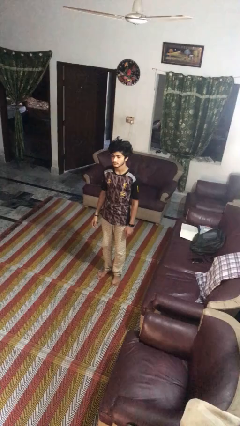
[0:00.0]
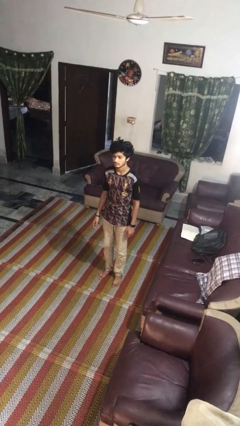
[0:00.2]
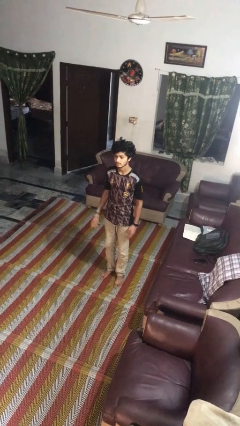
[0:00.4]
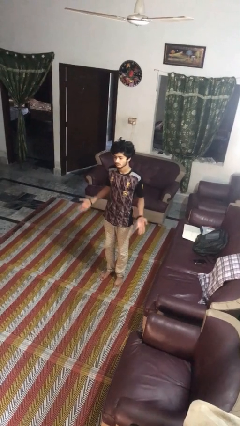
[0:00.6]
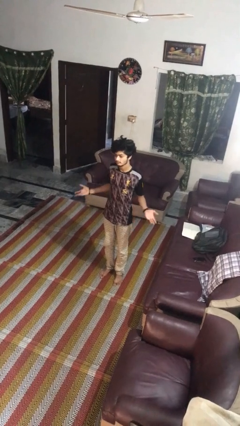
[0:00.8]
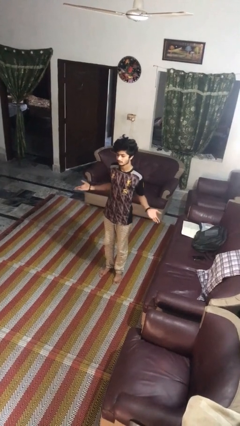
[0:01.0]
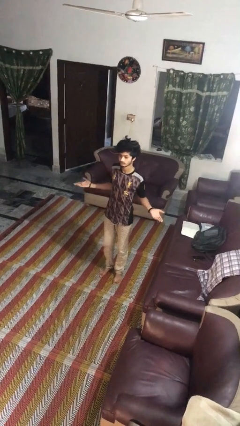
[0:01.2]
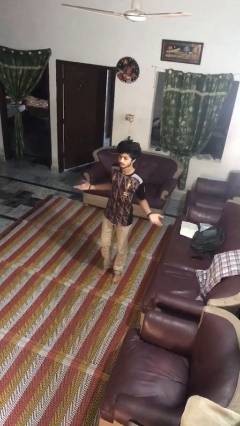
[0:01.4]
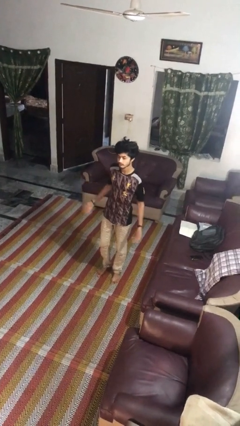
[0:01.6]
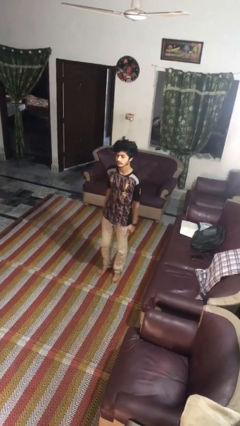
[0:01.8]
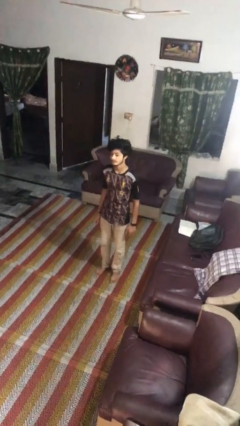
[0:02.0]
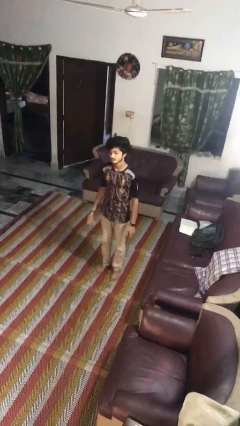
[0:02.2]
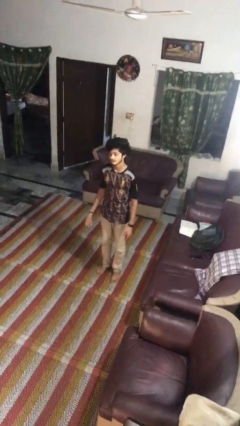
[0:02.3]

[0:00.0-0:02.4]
person shrugs

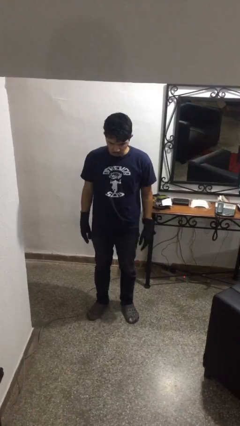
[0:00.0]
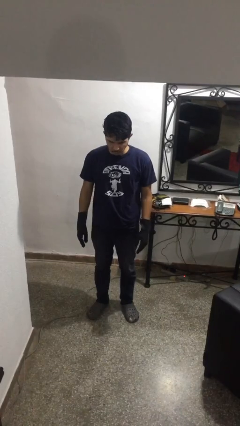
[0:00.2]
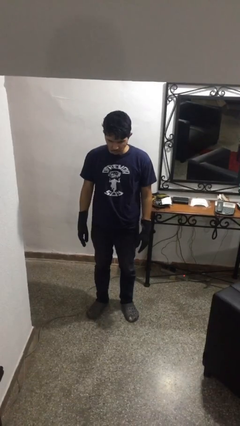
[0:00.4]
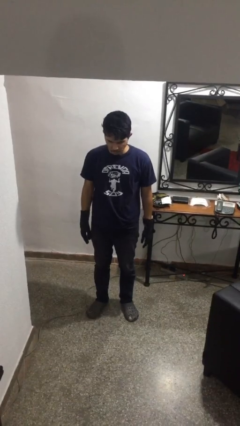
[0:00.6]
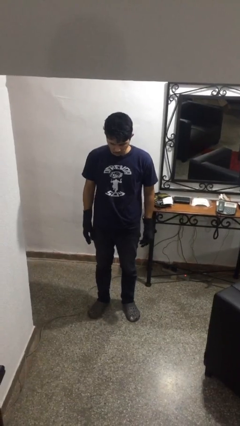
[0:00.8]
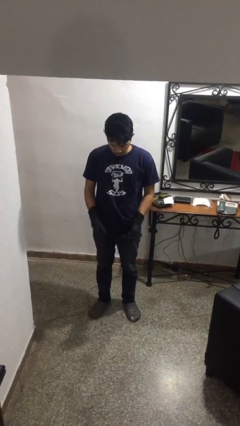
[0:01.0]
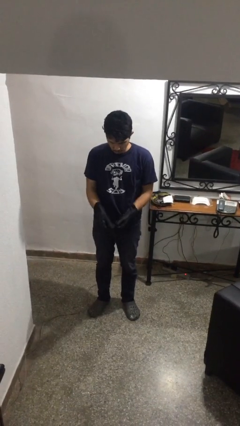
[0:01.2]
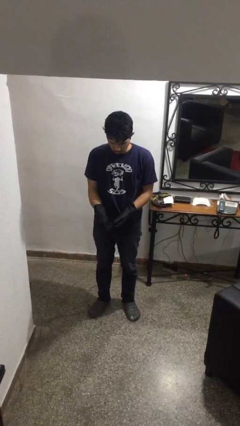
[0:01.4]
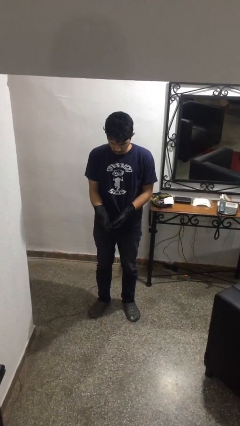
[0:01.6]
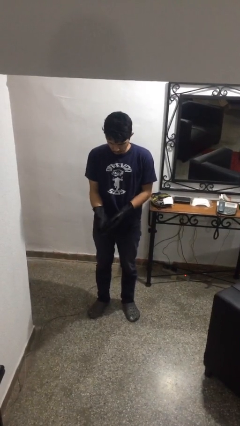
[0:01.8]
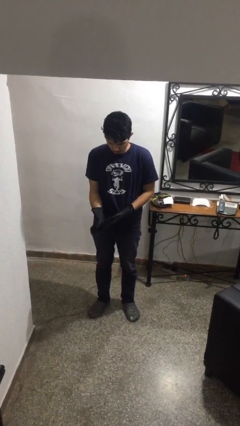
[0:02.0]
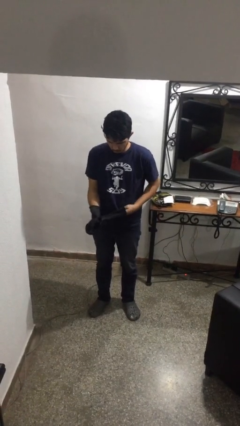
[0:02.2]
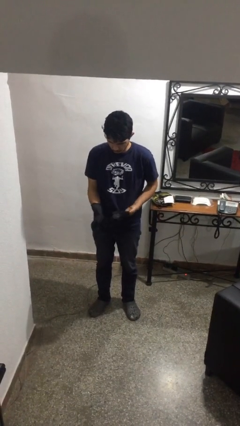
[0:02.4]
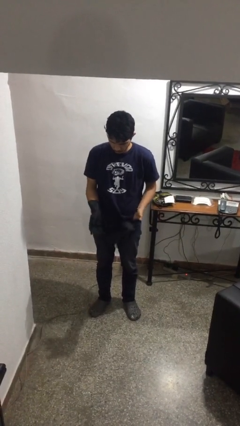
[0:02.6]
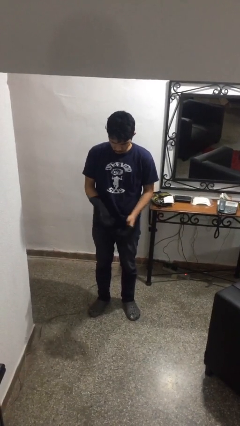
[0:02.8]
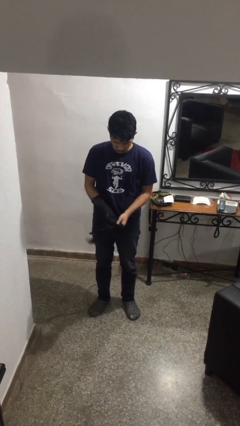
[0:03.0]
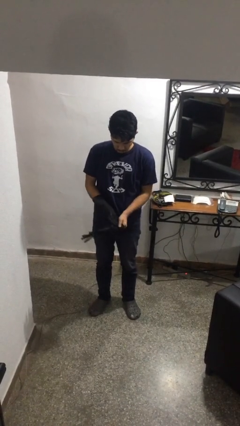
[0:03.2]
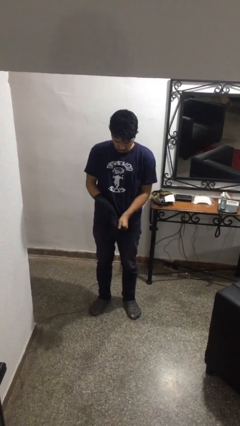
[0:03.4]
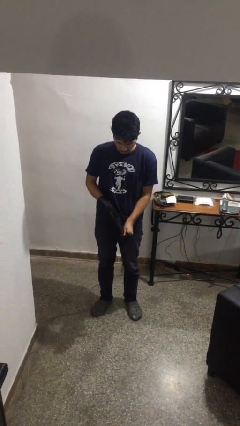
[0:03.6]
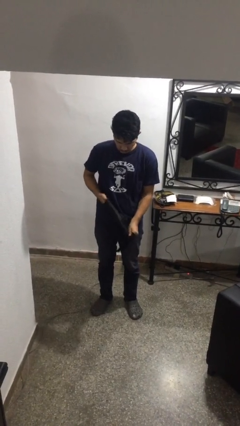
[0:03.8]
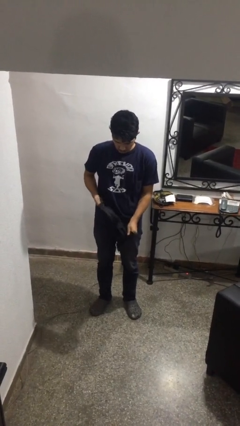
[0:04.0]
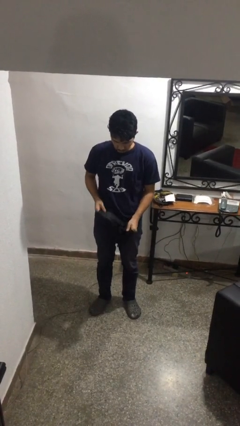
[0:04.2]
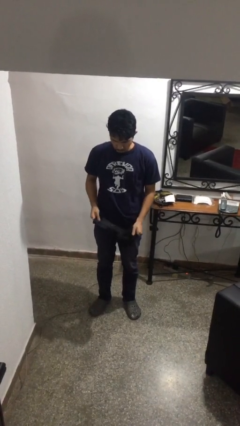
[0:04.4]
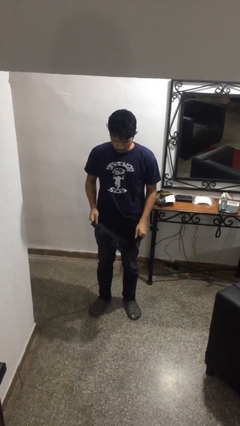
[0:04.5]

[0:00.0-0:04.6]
person takes off gloves

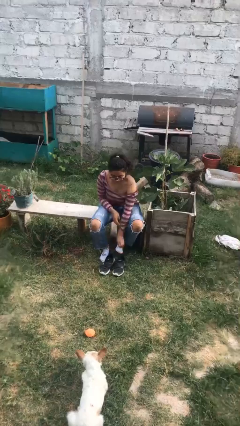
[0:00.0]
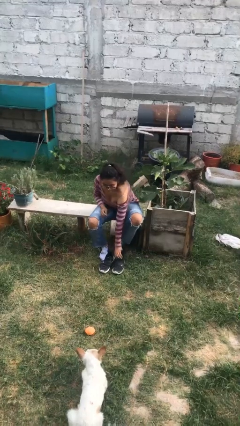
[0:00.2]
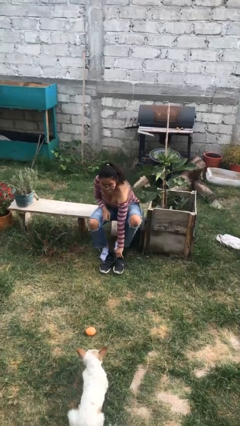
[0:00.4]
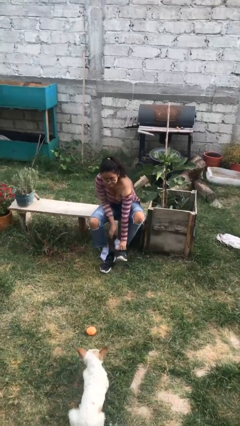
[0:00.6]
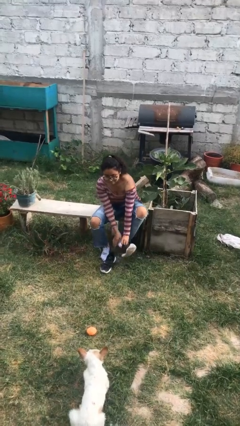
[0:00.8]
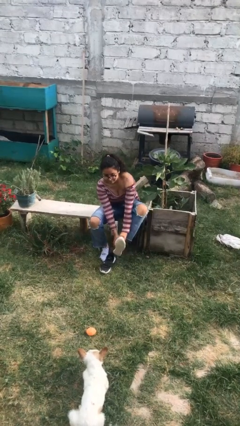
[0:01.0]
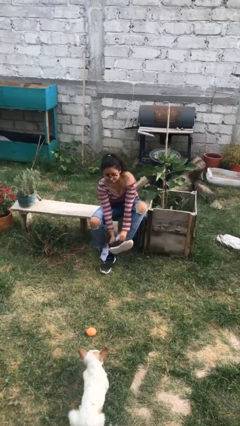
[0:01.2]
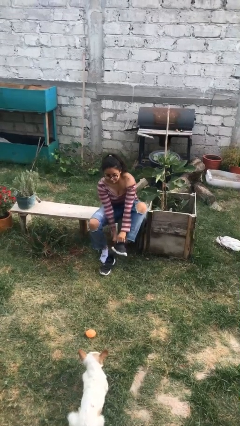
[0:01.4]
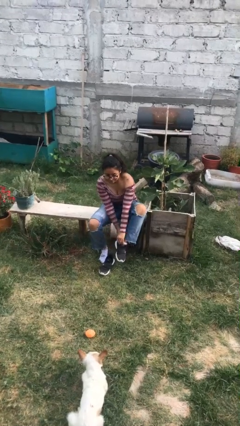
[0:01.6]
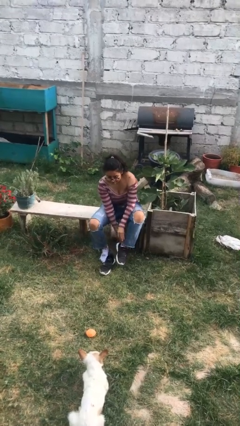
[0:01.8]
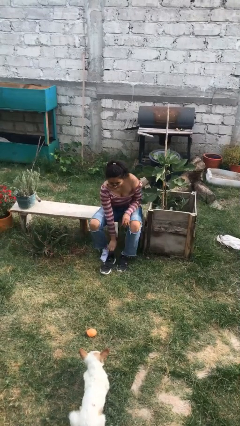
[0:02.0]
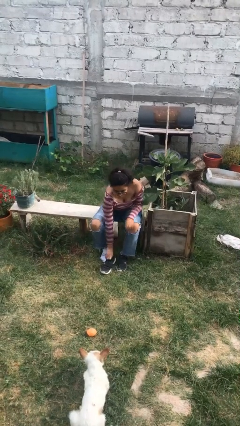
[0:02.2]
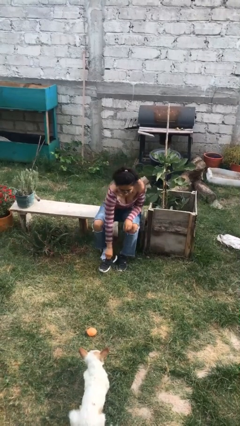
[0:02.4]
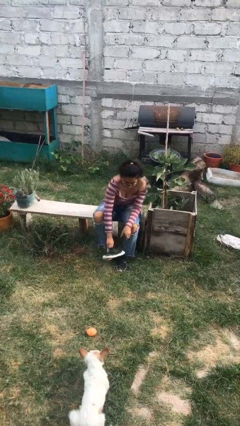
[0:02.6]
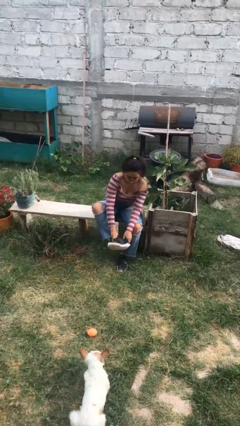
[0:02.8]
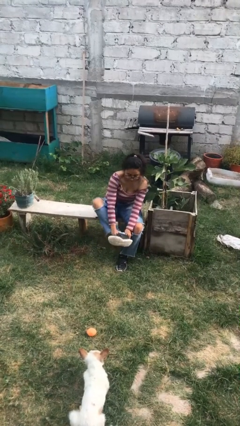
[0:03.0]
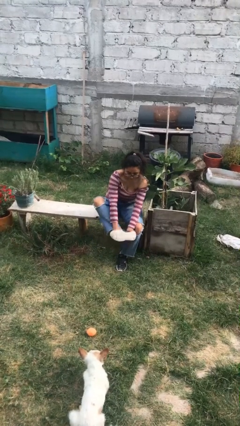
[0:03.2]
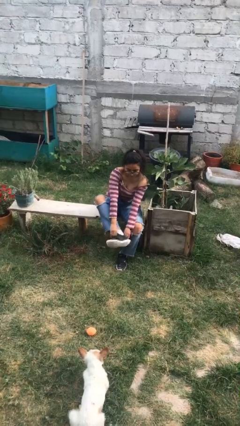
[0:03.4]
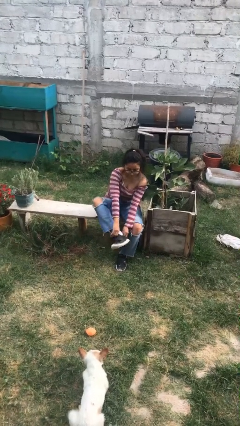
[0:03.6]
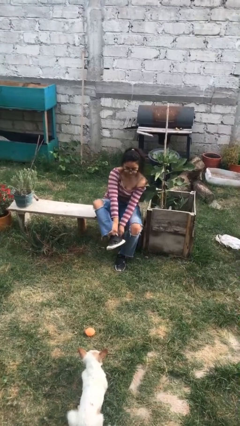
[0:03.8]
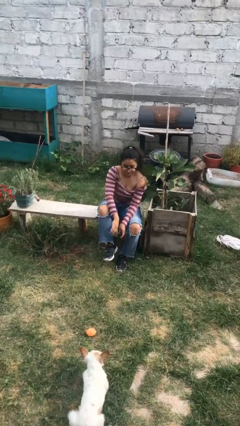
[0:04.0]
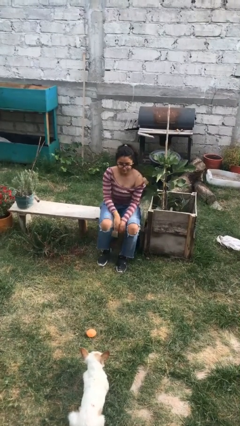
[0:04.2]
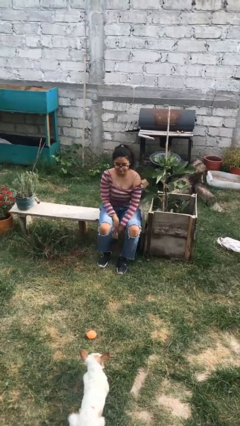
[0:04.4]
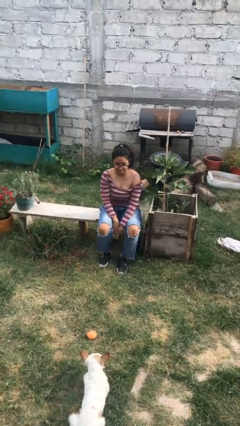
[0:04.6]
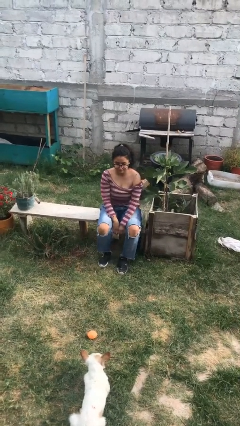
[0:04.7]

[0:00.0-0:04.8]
person puts on shoes

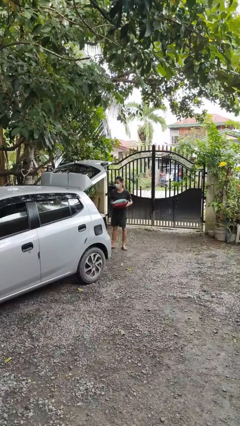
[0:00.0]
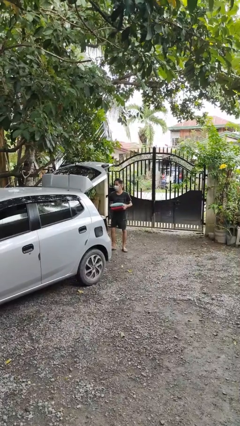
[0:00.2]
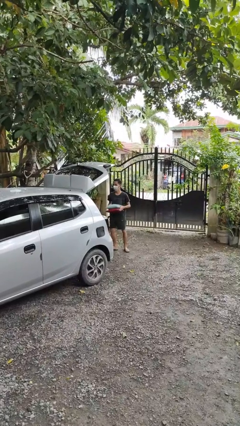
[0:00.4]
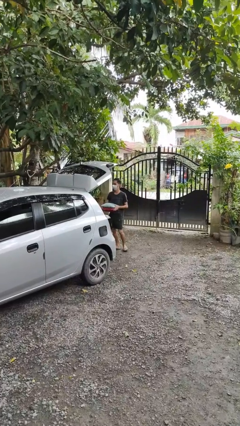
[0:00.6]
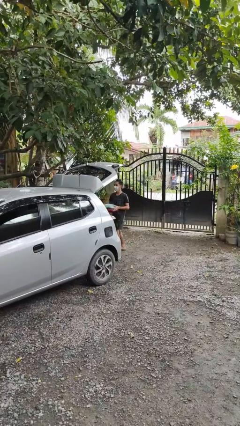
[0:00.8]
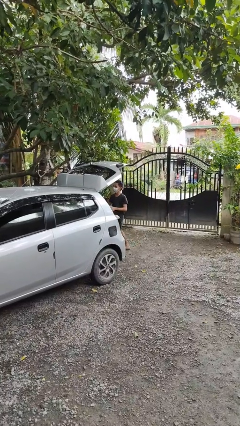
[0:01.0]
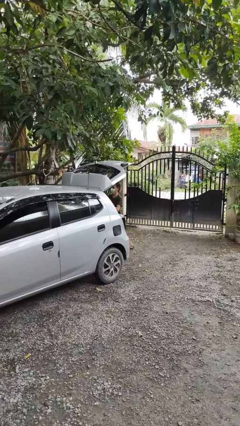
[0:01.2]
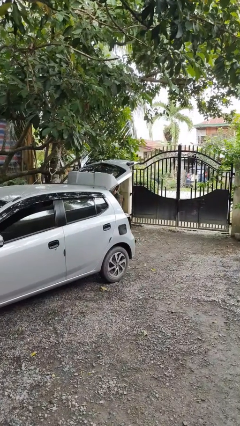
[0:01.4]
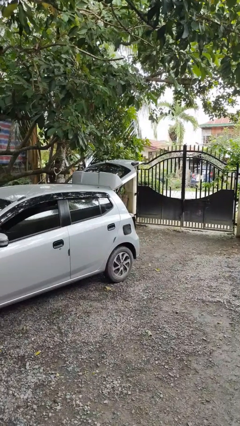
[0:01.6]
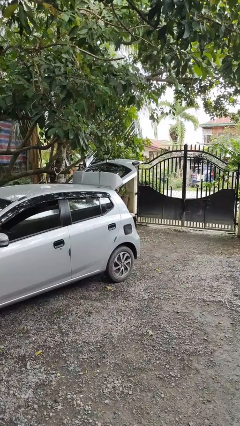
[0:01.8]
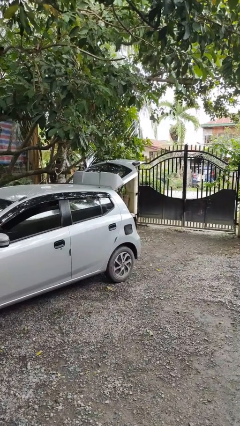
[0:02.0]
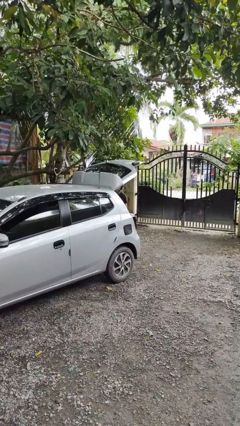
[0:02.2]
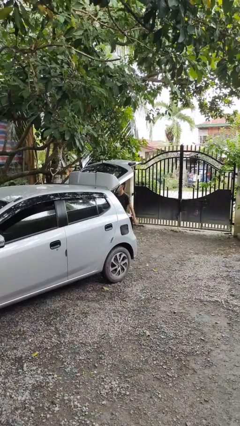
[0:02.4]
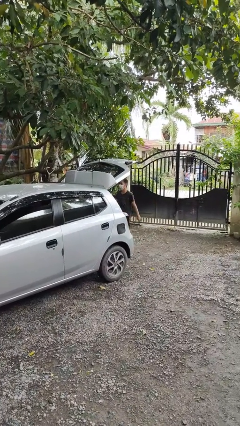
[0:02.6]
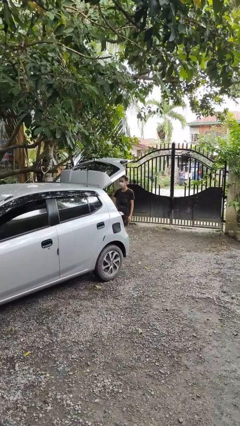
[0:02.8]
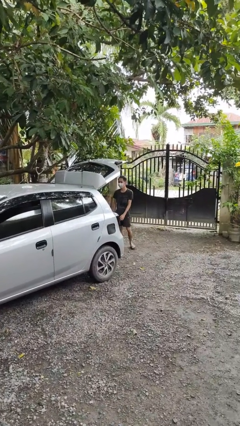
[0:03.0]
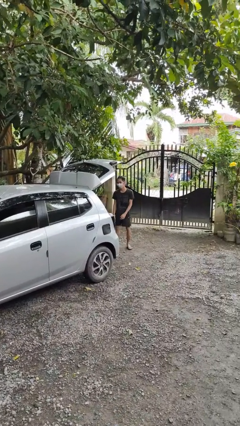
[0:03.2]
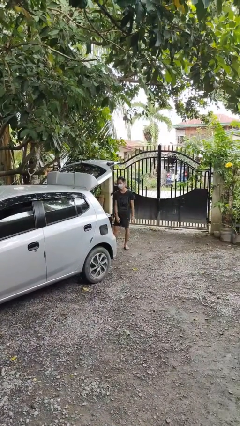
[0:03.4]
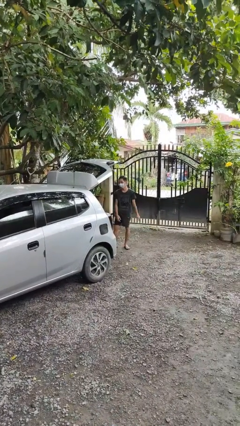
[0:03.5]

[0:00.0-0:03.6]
person loads car

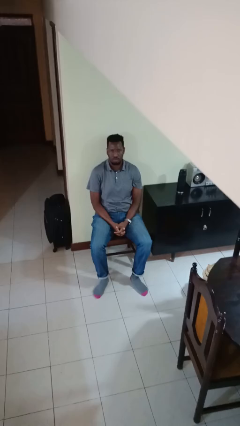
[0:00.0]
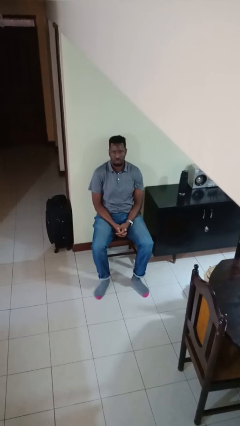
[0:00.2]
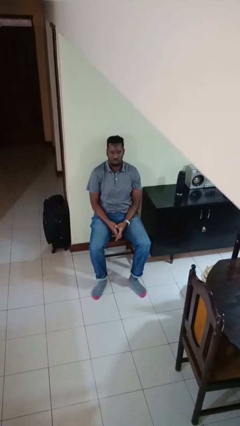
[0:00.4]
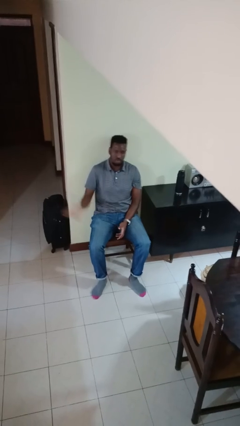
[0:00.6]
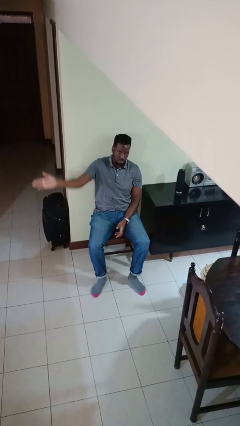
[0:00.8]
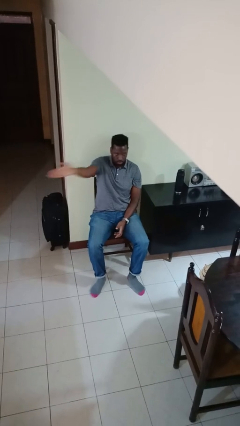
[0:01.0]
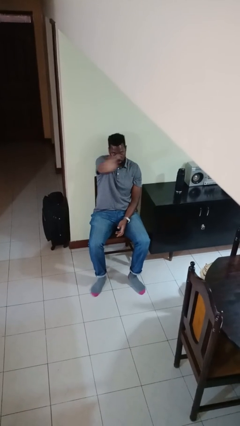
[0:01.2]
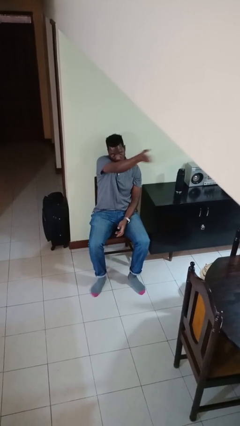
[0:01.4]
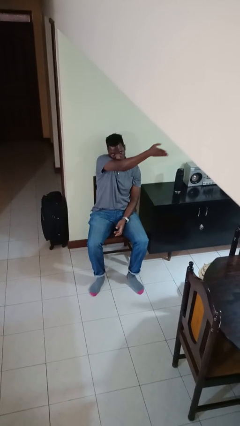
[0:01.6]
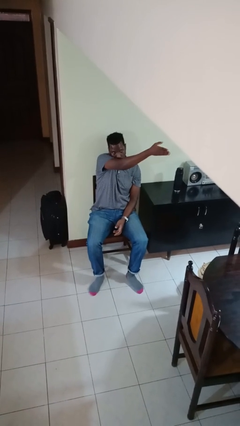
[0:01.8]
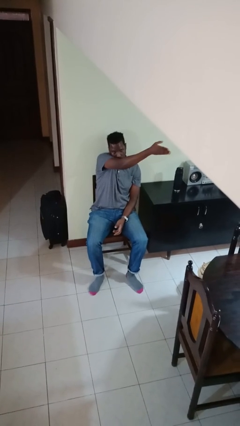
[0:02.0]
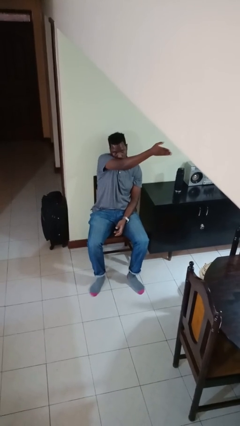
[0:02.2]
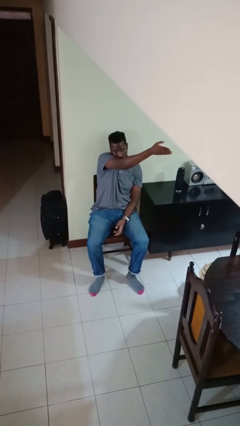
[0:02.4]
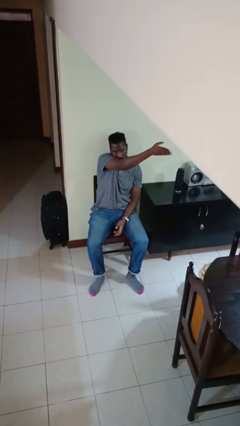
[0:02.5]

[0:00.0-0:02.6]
person gestures swipe left
